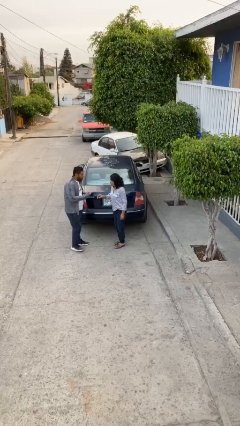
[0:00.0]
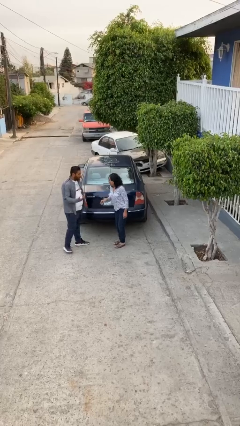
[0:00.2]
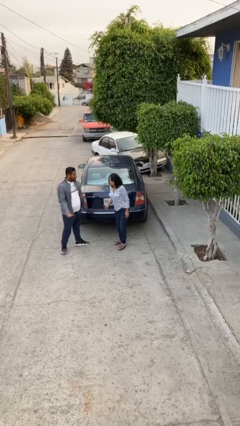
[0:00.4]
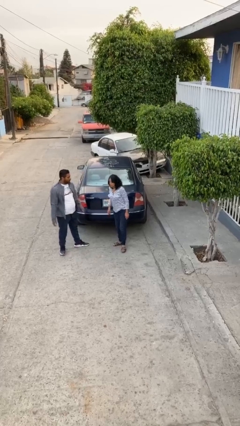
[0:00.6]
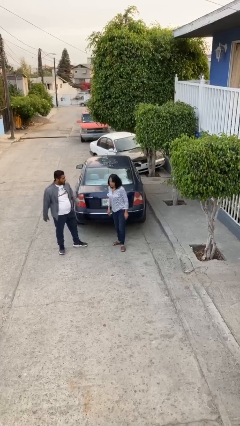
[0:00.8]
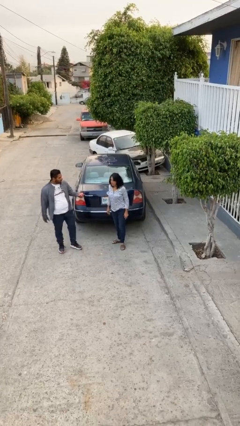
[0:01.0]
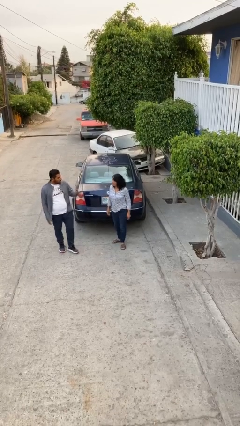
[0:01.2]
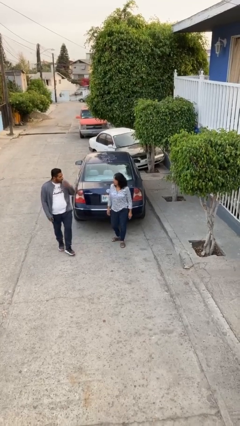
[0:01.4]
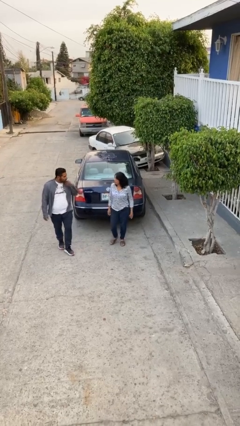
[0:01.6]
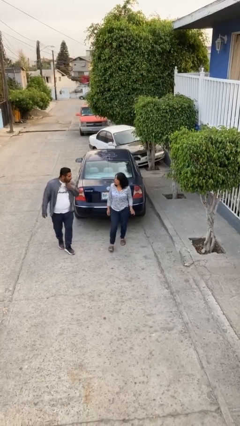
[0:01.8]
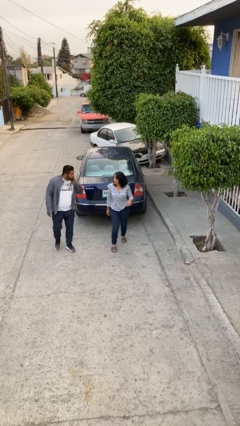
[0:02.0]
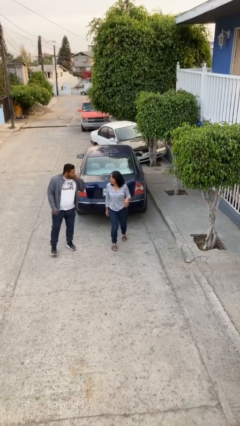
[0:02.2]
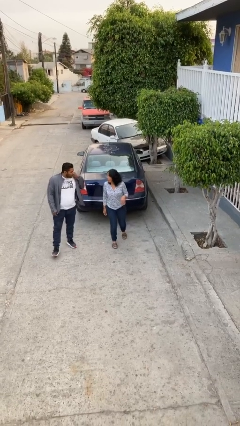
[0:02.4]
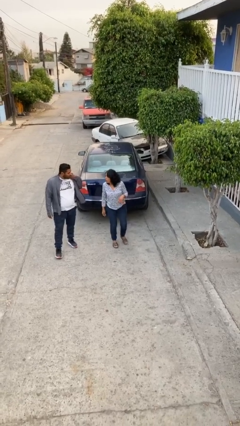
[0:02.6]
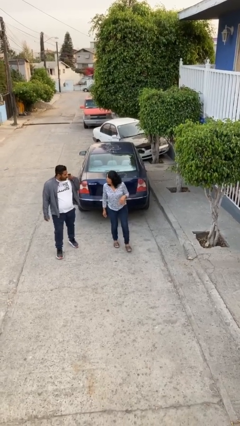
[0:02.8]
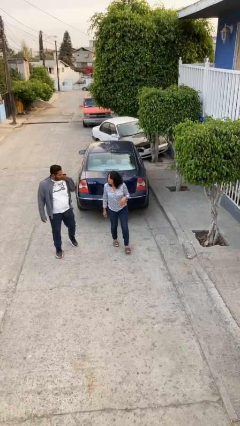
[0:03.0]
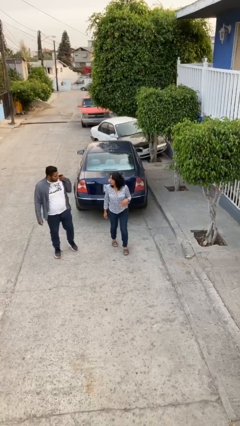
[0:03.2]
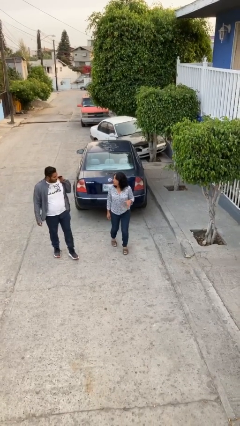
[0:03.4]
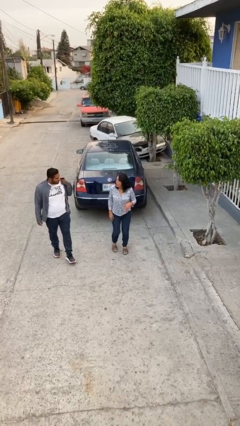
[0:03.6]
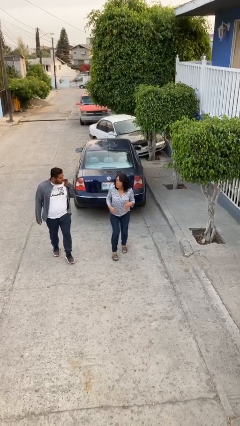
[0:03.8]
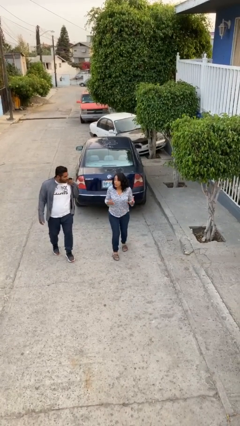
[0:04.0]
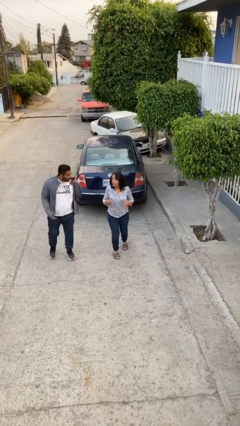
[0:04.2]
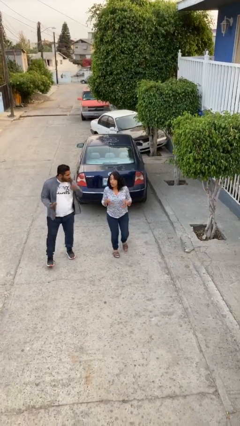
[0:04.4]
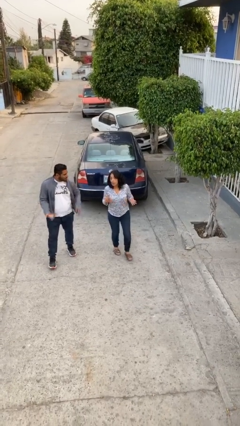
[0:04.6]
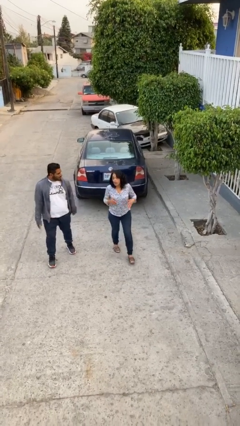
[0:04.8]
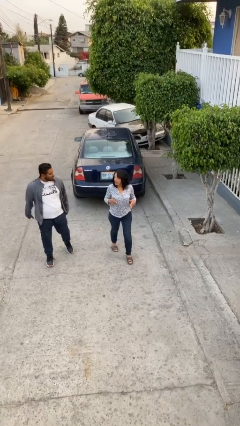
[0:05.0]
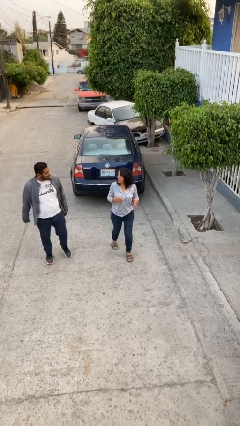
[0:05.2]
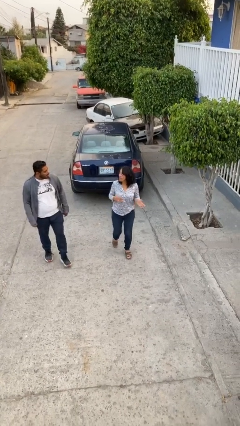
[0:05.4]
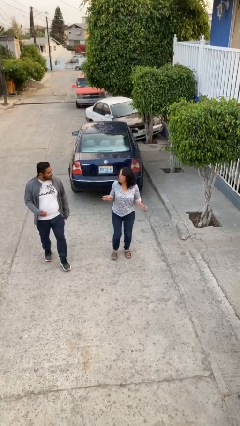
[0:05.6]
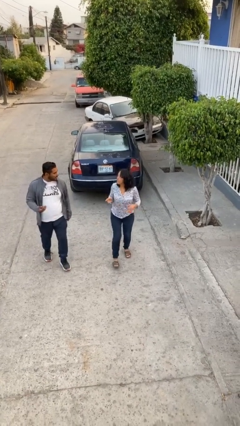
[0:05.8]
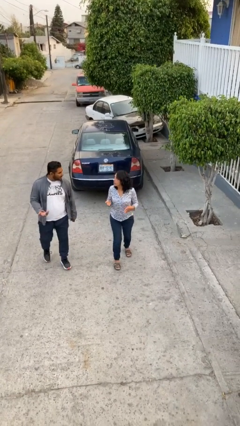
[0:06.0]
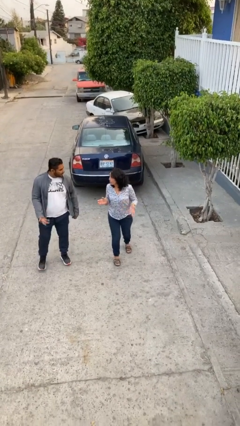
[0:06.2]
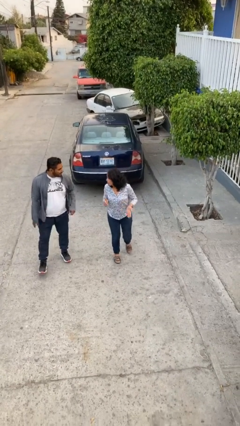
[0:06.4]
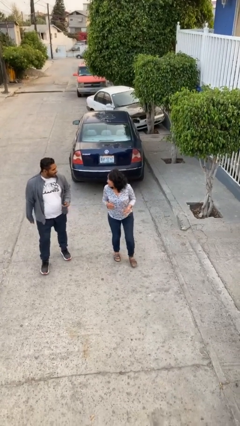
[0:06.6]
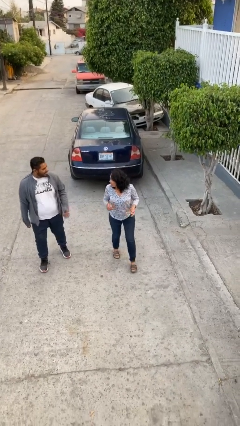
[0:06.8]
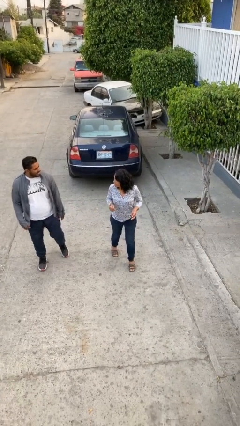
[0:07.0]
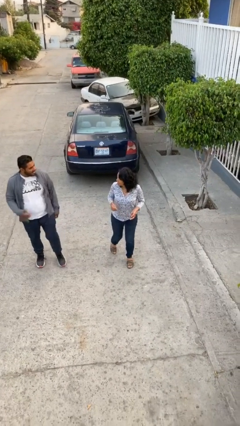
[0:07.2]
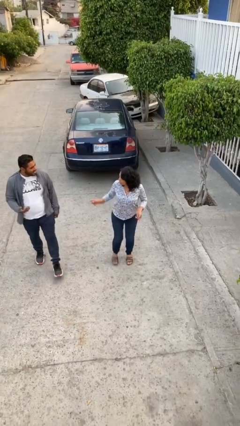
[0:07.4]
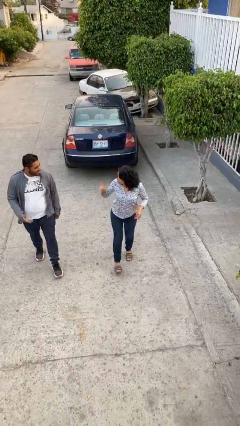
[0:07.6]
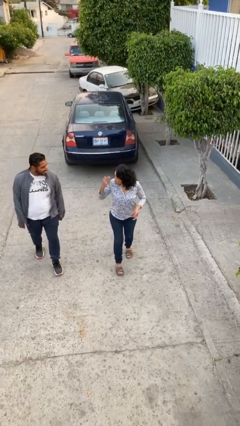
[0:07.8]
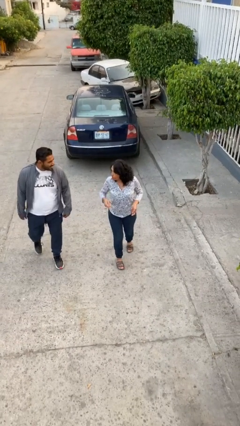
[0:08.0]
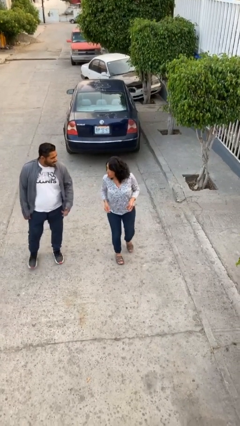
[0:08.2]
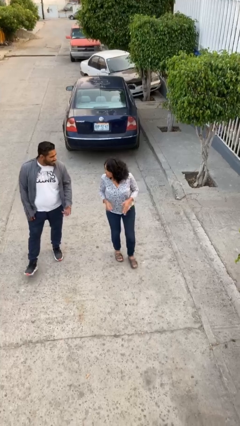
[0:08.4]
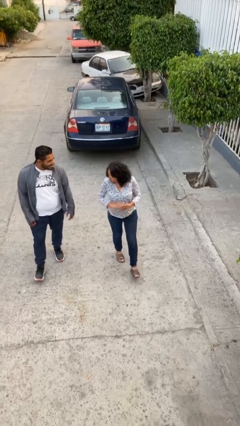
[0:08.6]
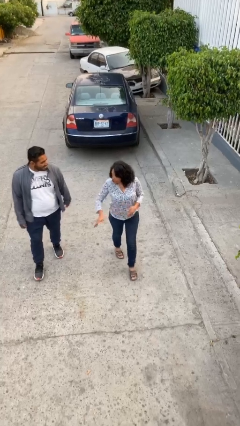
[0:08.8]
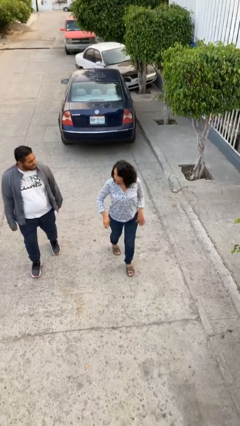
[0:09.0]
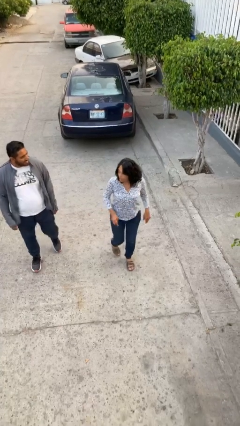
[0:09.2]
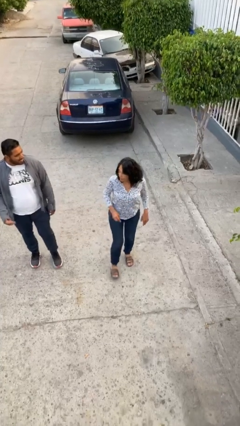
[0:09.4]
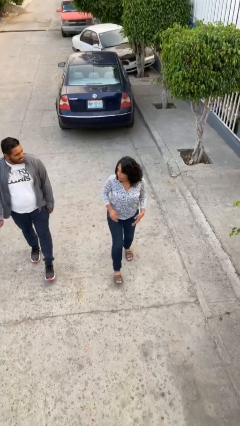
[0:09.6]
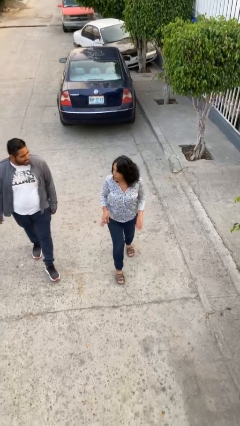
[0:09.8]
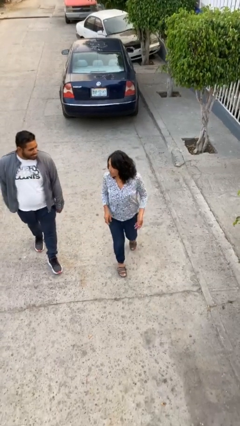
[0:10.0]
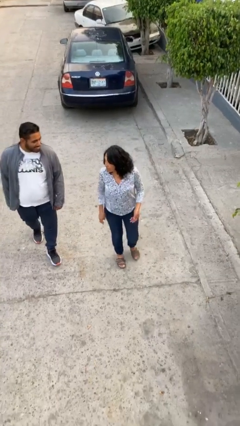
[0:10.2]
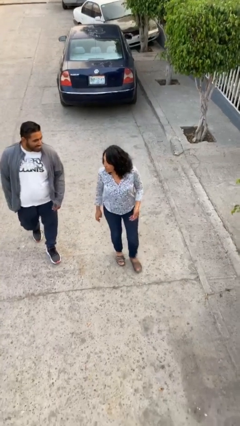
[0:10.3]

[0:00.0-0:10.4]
person talks to person

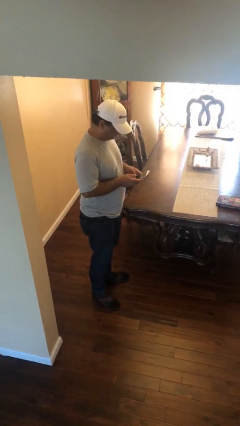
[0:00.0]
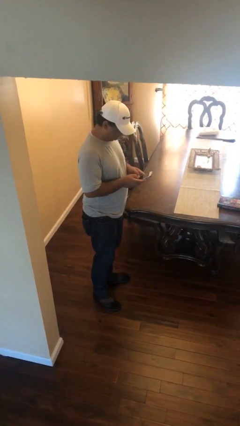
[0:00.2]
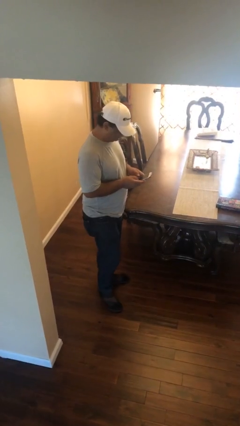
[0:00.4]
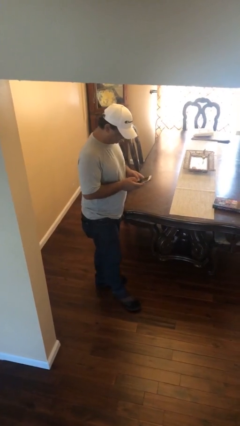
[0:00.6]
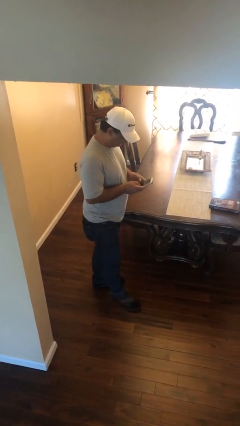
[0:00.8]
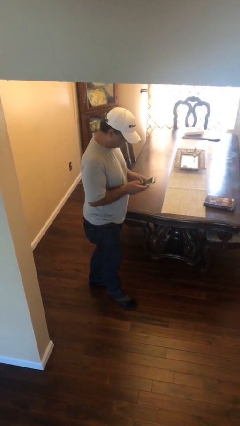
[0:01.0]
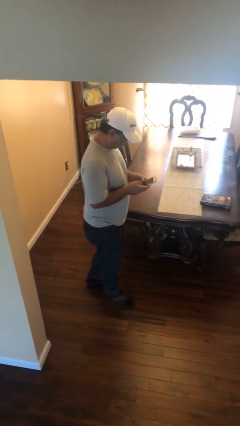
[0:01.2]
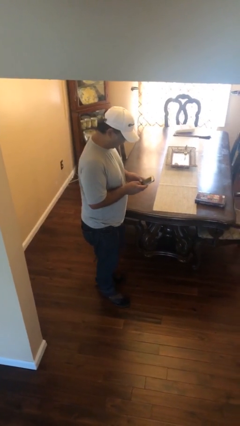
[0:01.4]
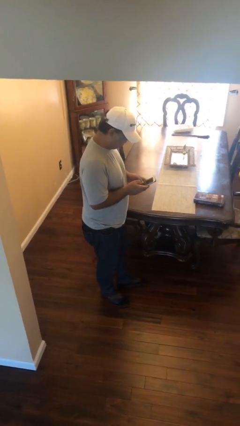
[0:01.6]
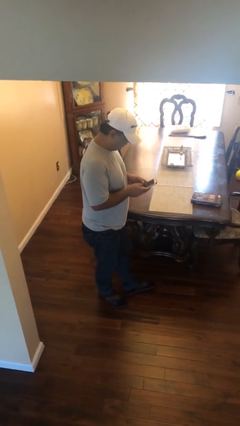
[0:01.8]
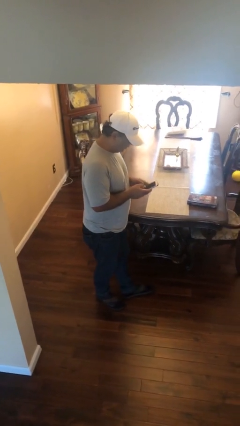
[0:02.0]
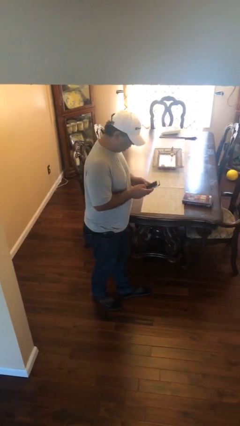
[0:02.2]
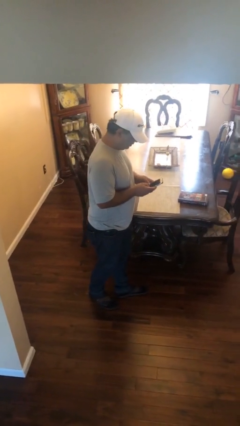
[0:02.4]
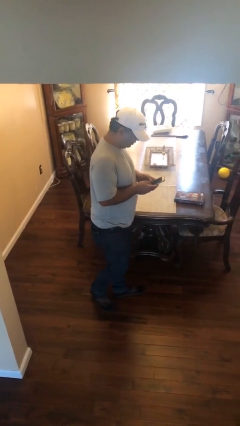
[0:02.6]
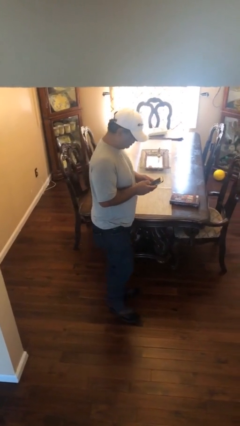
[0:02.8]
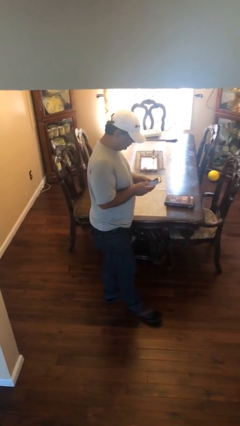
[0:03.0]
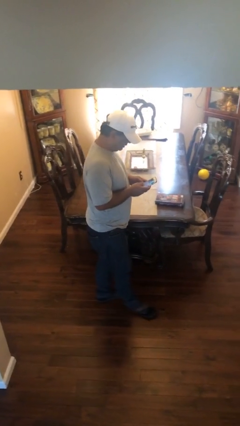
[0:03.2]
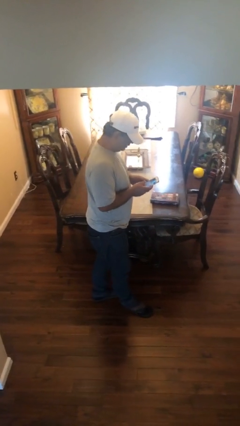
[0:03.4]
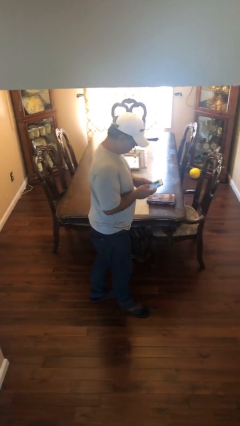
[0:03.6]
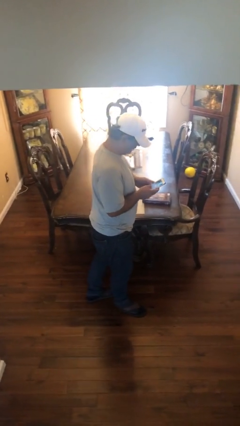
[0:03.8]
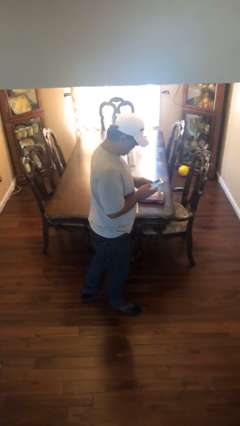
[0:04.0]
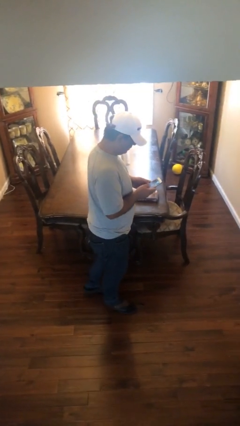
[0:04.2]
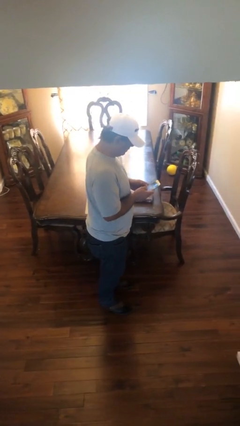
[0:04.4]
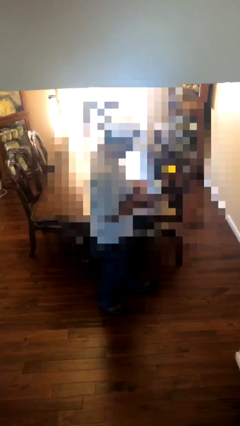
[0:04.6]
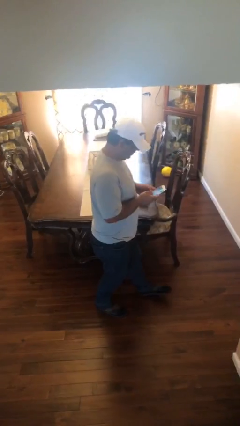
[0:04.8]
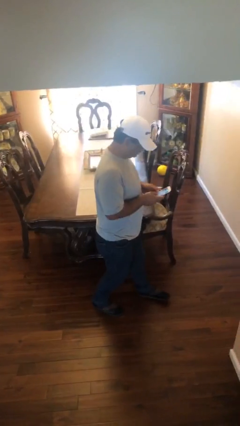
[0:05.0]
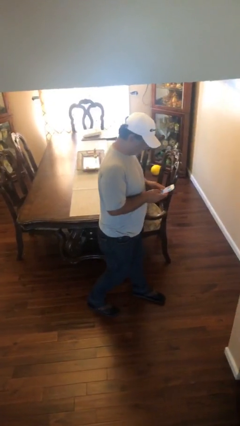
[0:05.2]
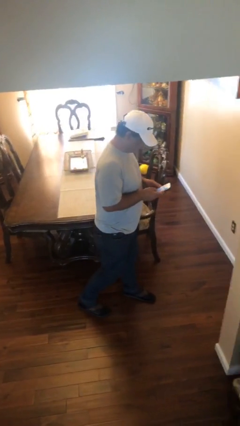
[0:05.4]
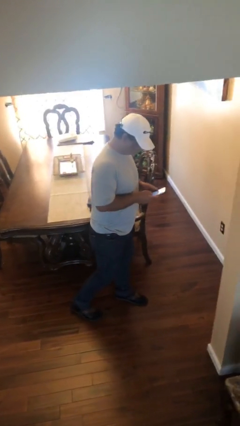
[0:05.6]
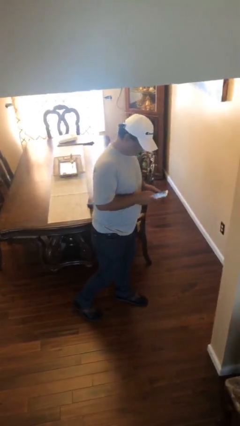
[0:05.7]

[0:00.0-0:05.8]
person texts on phone

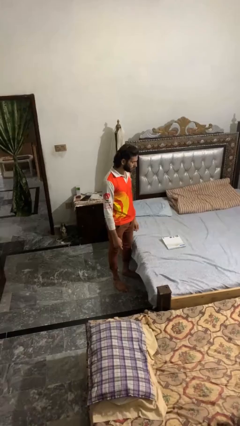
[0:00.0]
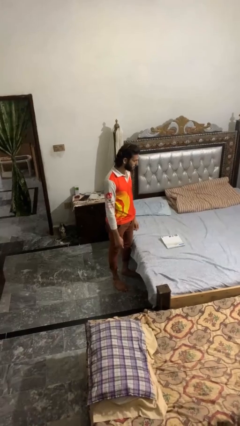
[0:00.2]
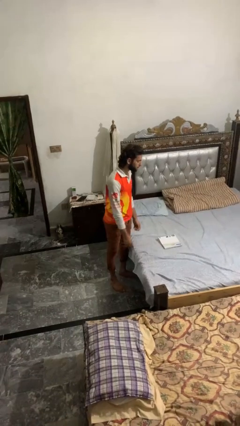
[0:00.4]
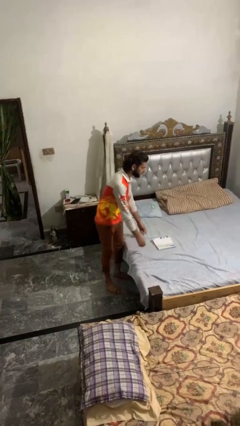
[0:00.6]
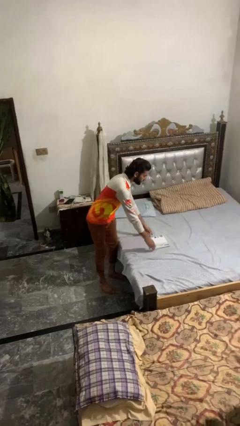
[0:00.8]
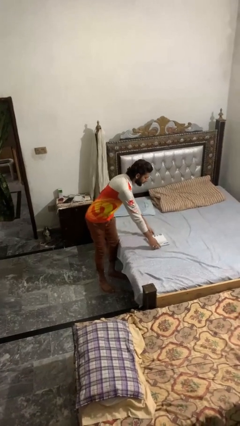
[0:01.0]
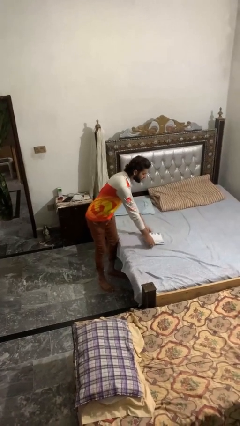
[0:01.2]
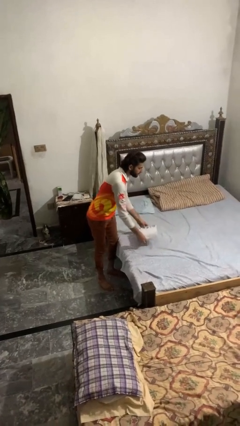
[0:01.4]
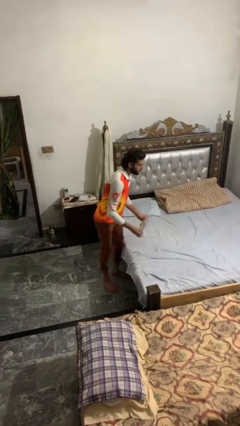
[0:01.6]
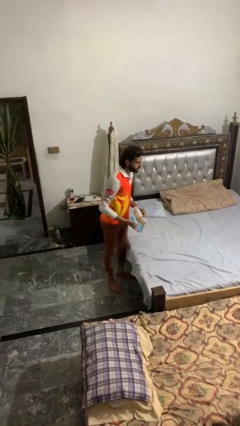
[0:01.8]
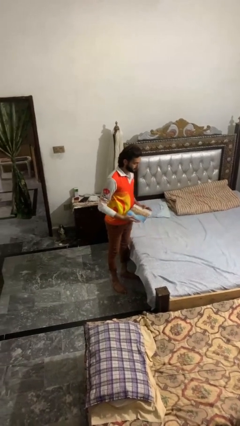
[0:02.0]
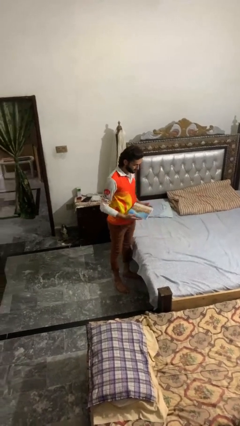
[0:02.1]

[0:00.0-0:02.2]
person picks up object from bed
